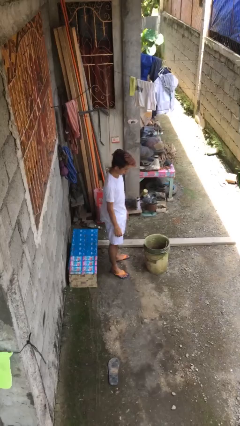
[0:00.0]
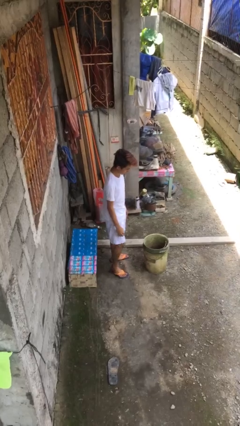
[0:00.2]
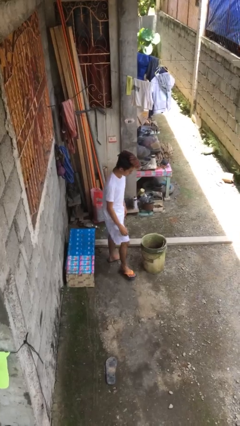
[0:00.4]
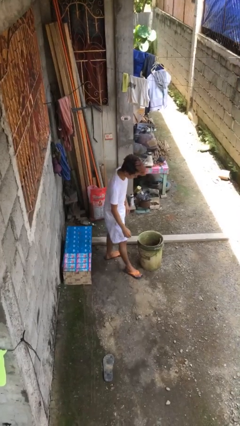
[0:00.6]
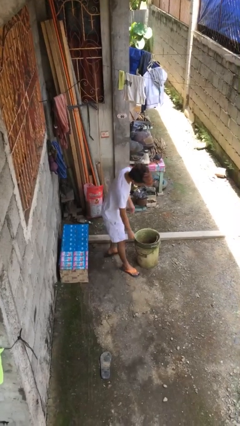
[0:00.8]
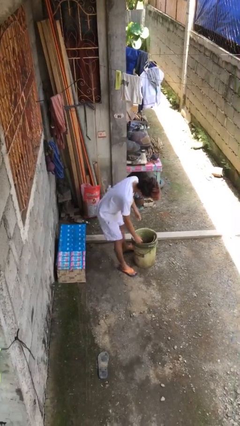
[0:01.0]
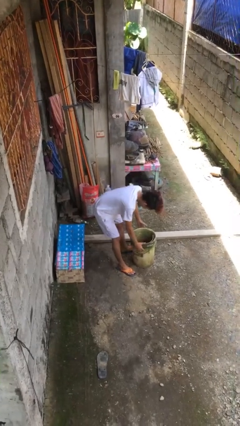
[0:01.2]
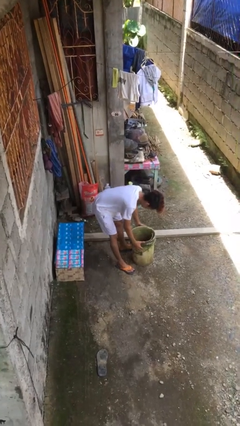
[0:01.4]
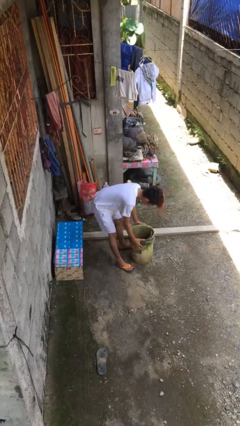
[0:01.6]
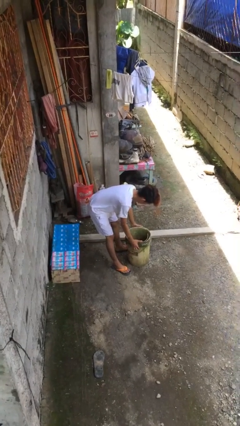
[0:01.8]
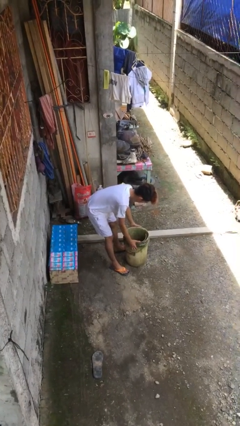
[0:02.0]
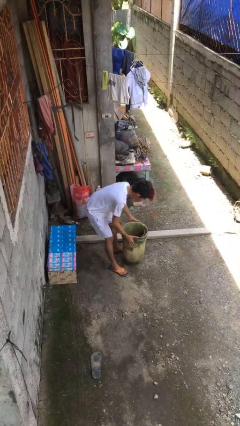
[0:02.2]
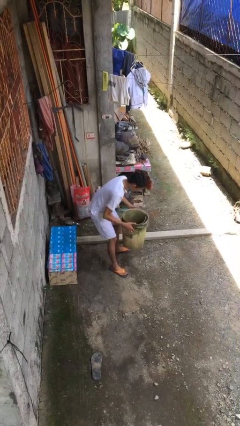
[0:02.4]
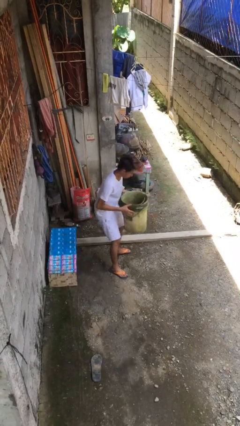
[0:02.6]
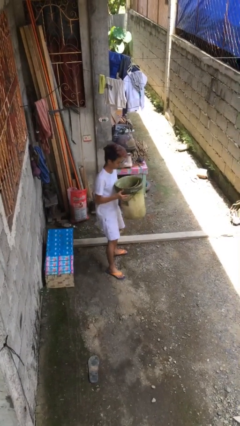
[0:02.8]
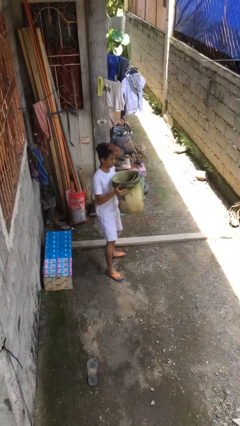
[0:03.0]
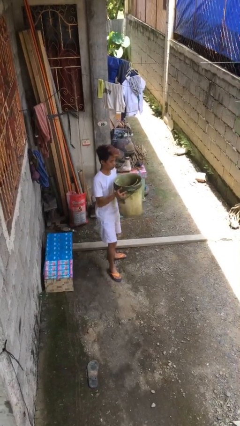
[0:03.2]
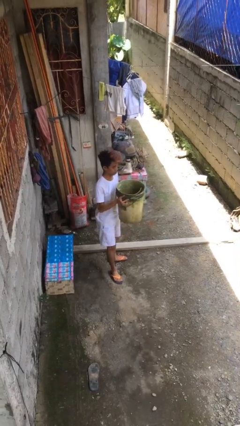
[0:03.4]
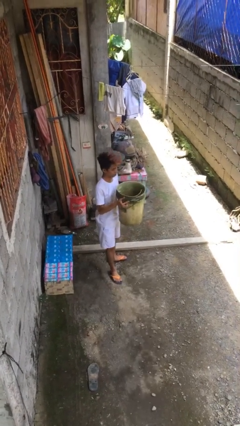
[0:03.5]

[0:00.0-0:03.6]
person picks up object from floor

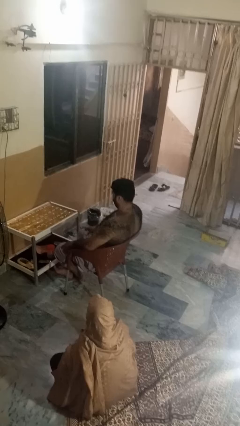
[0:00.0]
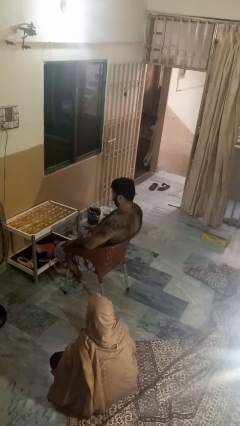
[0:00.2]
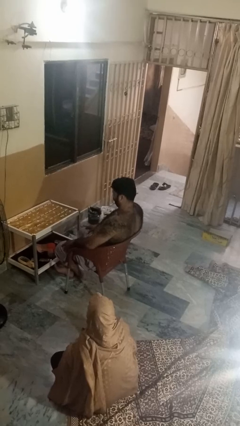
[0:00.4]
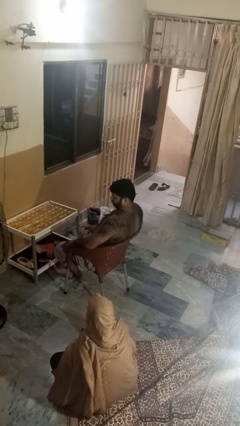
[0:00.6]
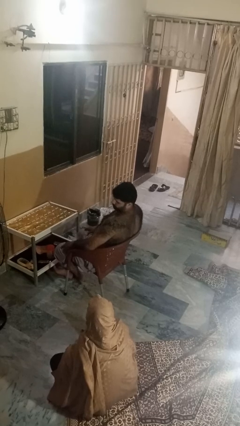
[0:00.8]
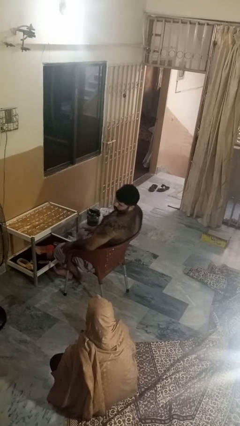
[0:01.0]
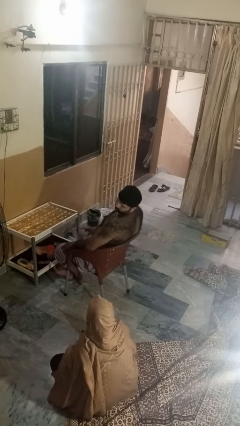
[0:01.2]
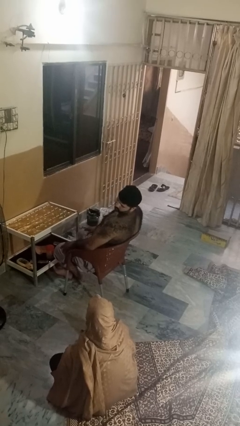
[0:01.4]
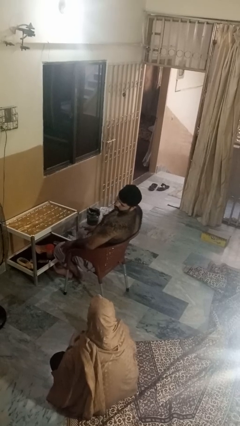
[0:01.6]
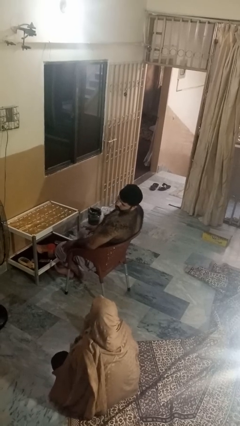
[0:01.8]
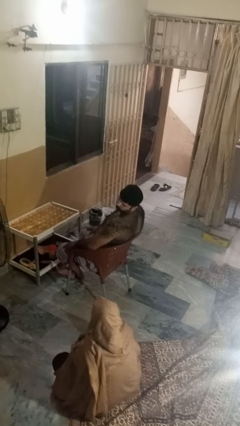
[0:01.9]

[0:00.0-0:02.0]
person looks over shoulder

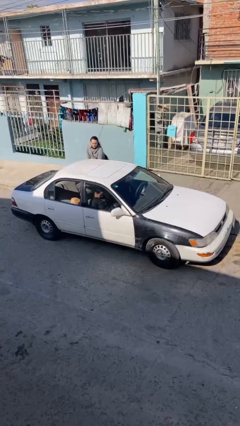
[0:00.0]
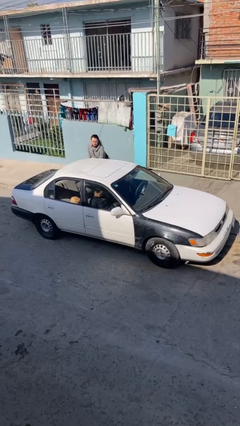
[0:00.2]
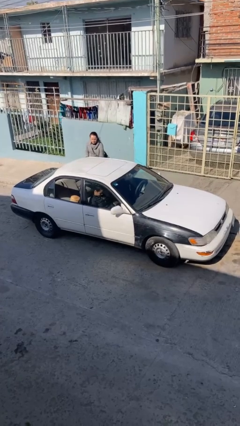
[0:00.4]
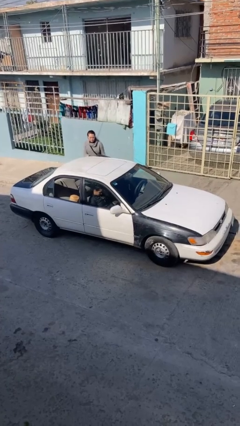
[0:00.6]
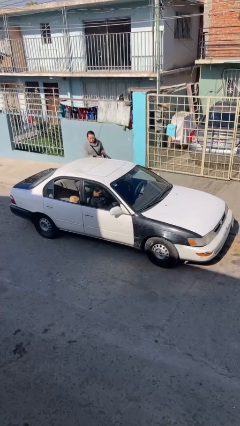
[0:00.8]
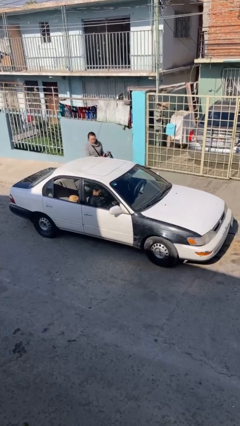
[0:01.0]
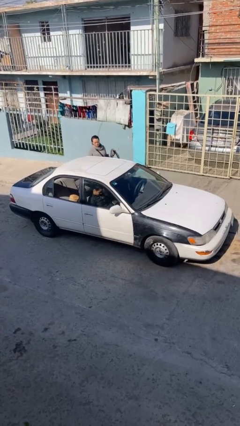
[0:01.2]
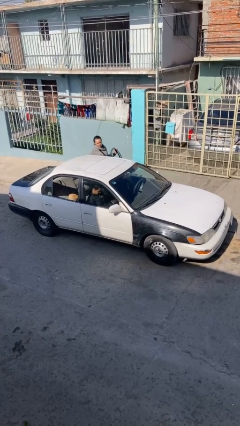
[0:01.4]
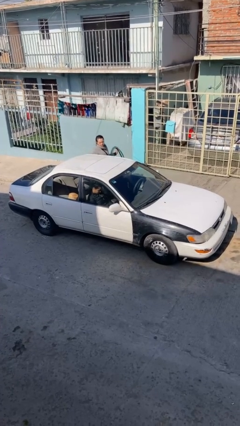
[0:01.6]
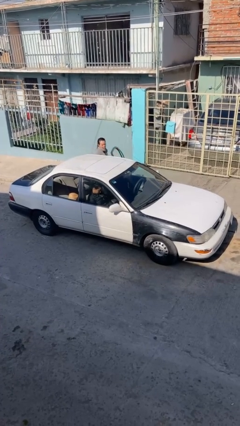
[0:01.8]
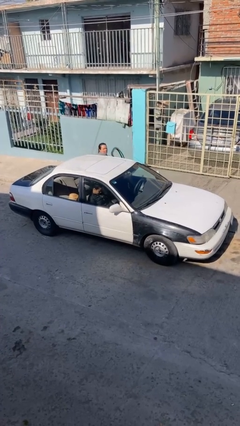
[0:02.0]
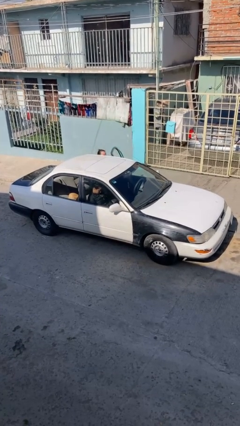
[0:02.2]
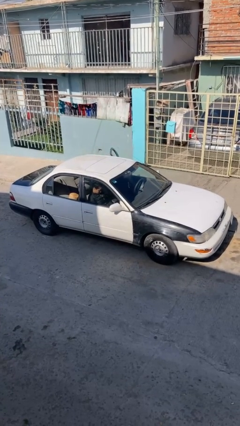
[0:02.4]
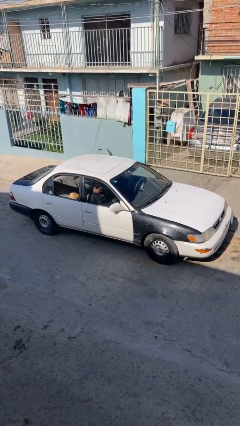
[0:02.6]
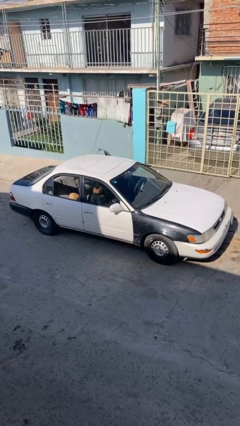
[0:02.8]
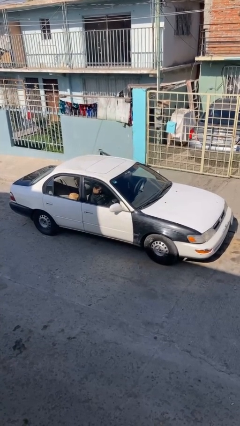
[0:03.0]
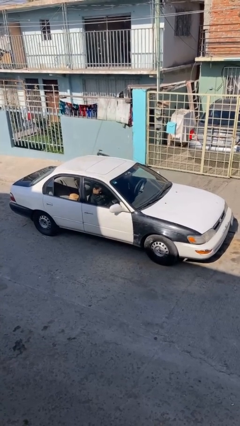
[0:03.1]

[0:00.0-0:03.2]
car picks up person

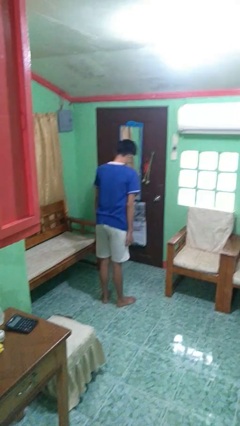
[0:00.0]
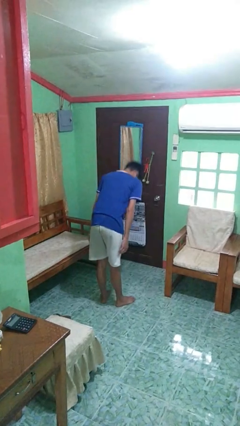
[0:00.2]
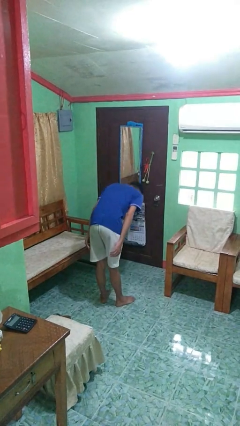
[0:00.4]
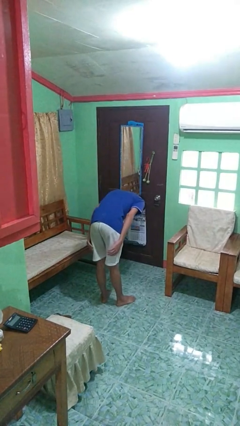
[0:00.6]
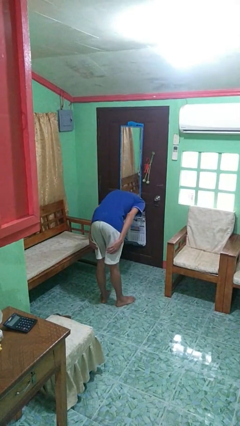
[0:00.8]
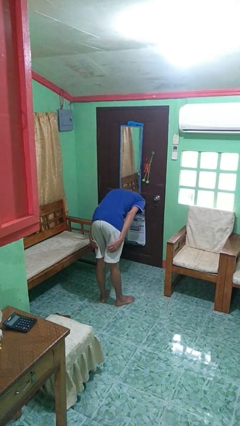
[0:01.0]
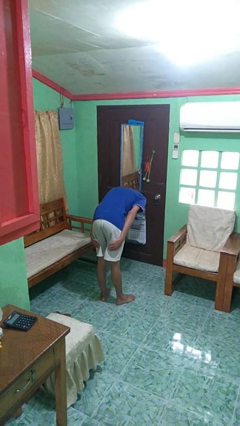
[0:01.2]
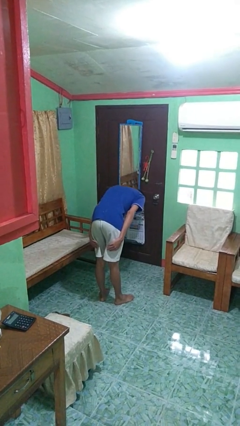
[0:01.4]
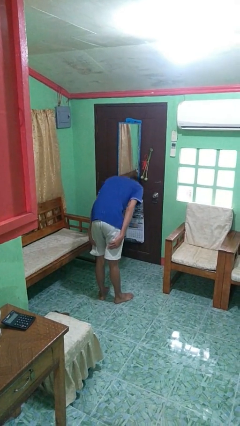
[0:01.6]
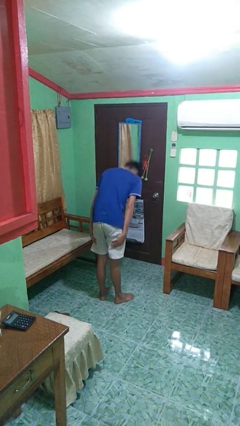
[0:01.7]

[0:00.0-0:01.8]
person bows

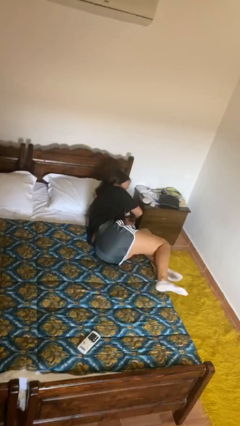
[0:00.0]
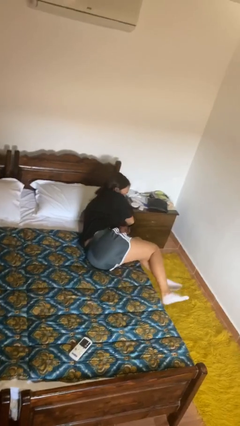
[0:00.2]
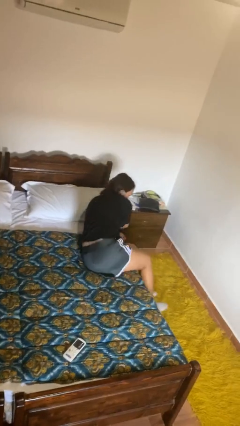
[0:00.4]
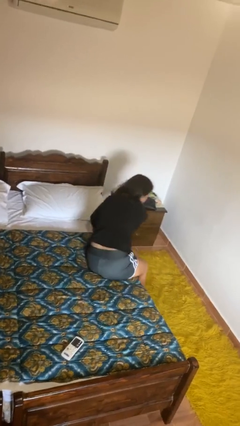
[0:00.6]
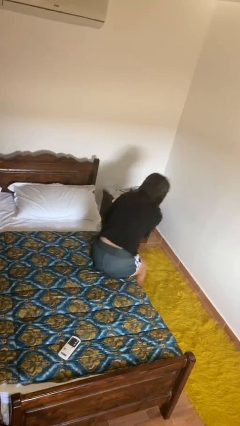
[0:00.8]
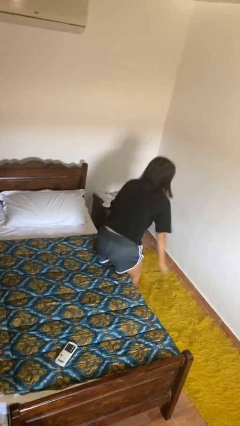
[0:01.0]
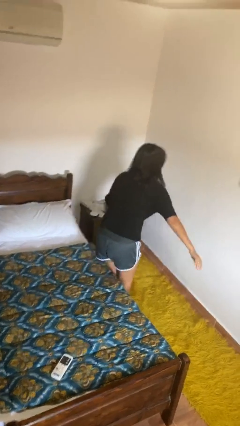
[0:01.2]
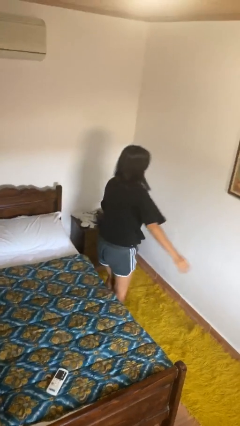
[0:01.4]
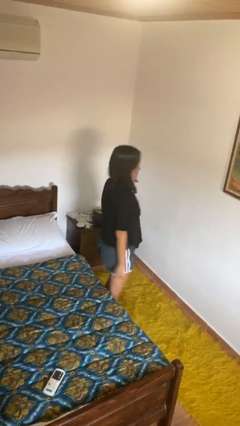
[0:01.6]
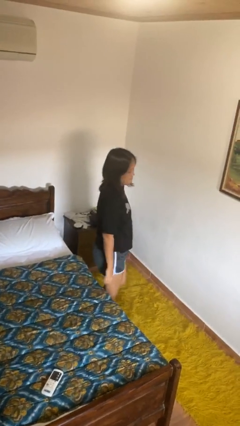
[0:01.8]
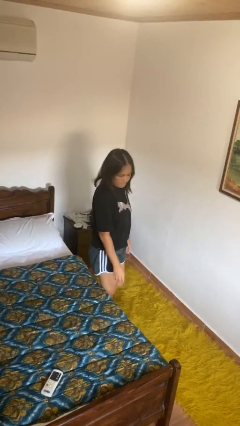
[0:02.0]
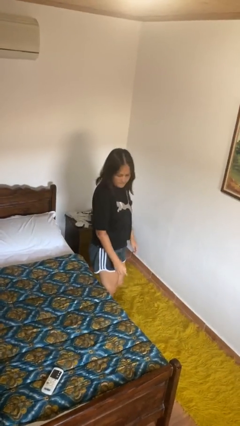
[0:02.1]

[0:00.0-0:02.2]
person stands up

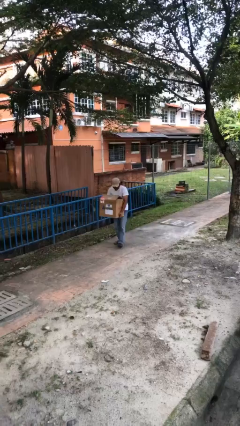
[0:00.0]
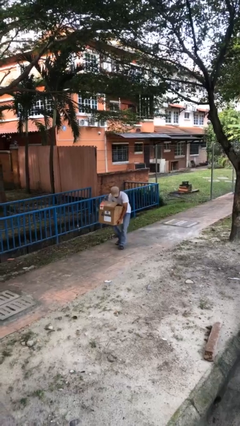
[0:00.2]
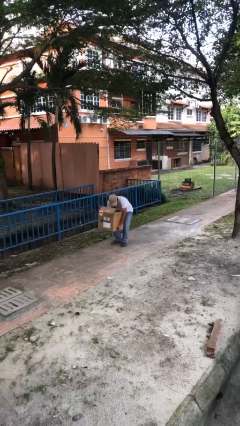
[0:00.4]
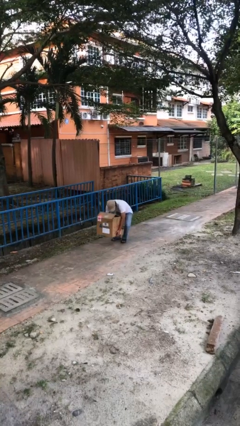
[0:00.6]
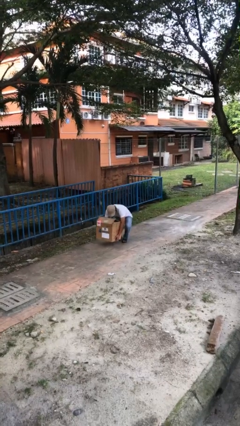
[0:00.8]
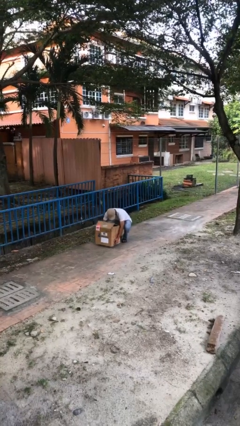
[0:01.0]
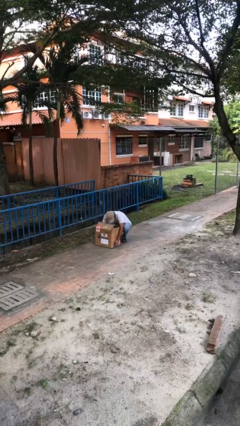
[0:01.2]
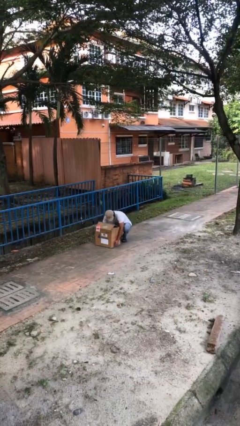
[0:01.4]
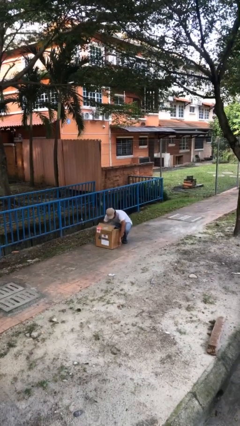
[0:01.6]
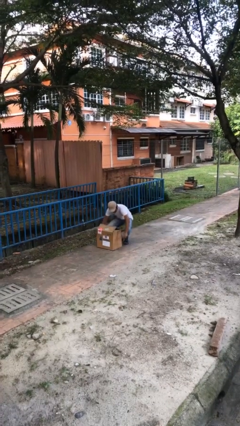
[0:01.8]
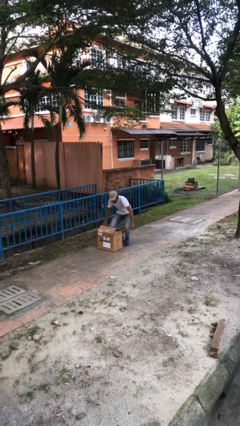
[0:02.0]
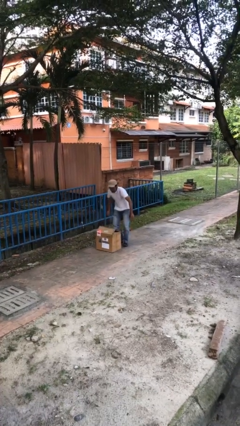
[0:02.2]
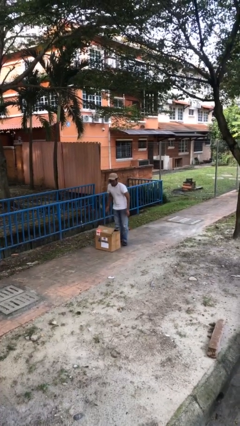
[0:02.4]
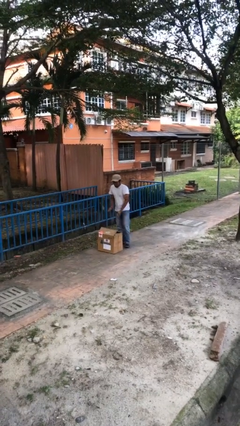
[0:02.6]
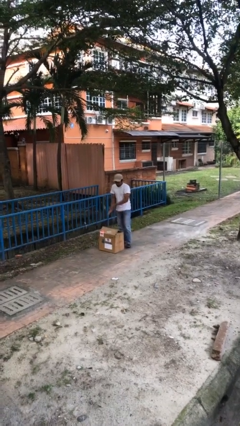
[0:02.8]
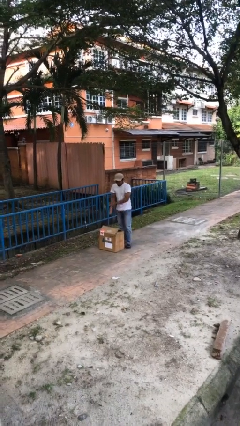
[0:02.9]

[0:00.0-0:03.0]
person puts down object on floor

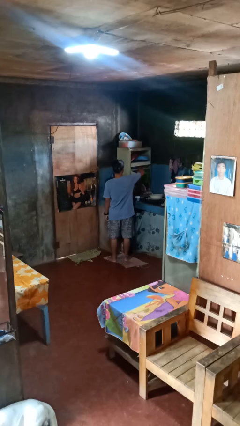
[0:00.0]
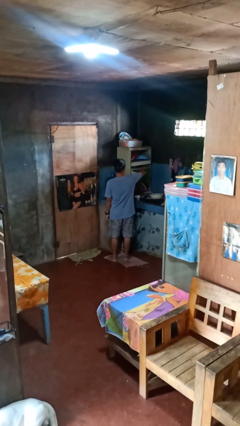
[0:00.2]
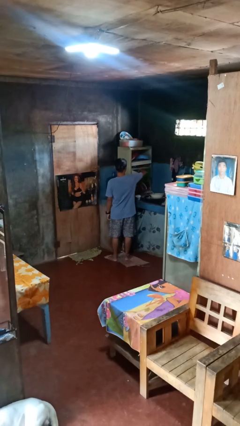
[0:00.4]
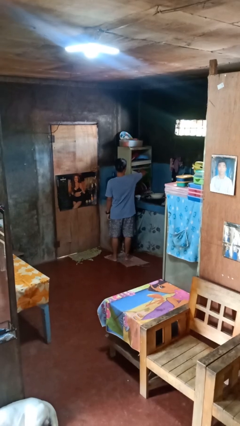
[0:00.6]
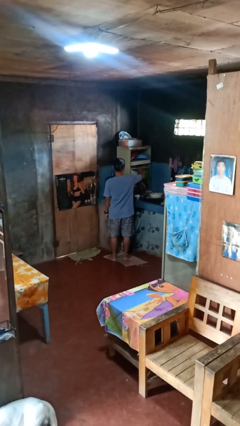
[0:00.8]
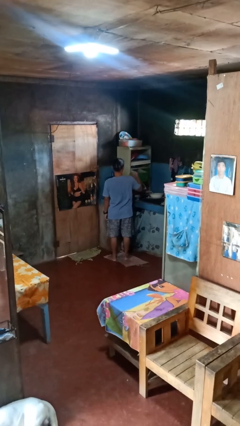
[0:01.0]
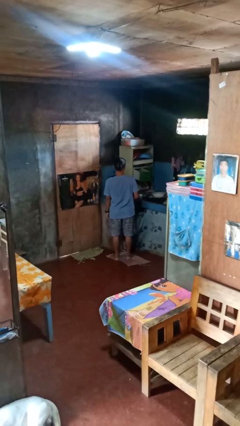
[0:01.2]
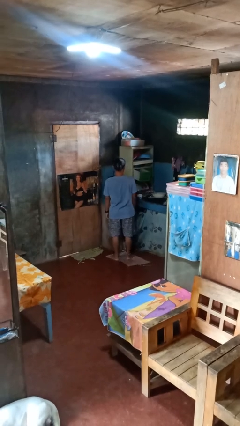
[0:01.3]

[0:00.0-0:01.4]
person puts object into kitchen drawer
